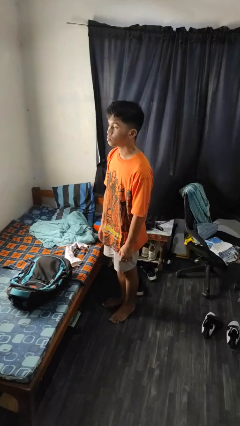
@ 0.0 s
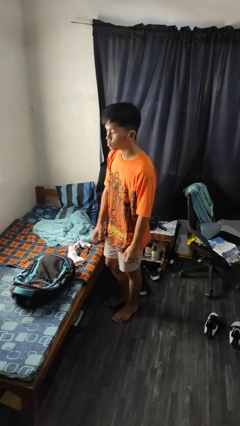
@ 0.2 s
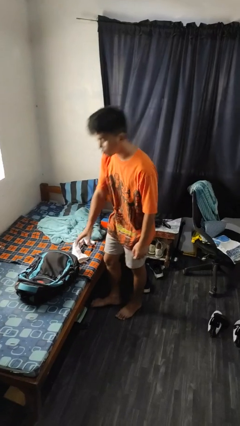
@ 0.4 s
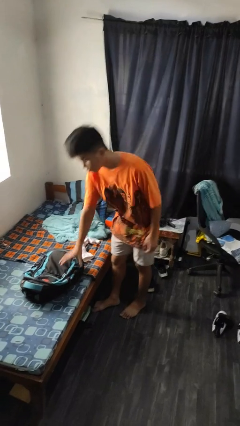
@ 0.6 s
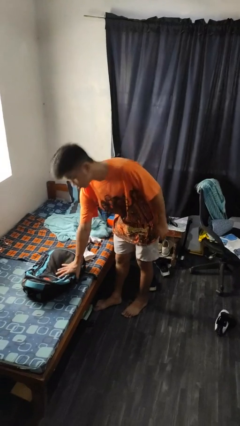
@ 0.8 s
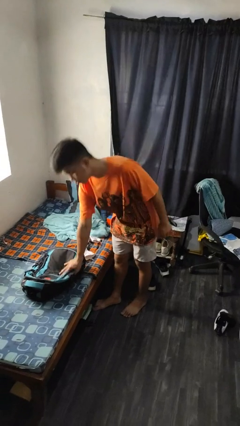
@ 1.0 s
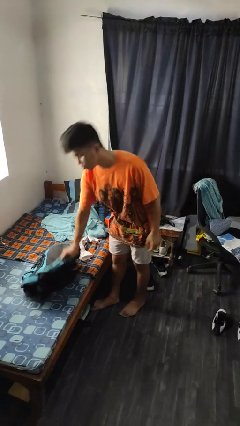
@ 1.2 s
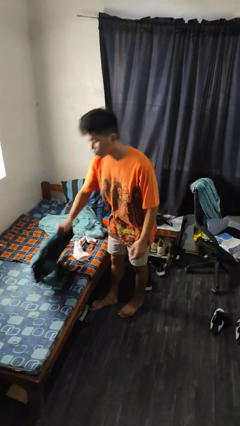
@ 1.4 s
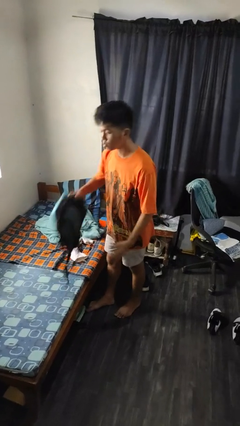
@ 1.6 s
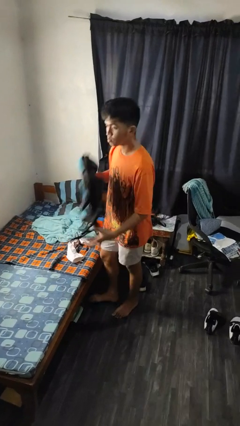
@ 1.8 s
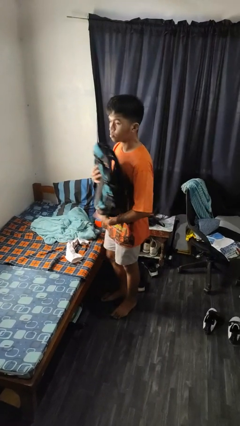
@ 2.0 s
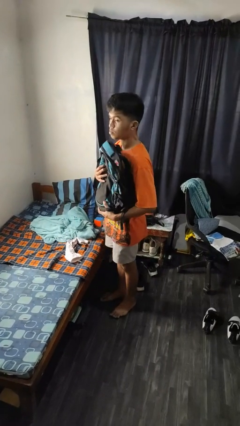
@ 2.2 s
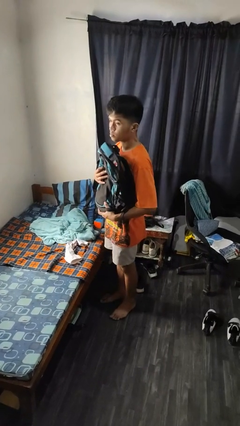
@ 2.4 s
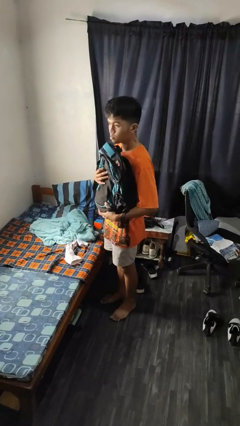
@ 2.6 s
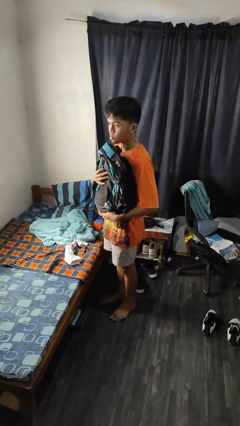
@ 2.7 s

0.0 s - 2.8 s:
person picks up object from bed

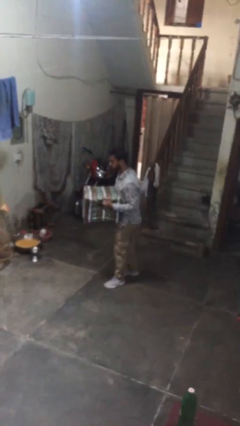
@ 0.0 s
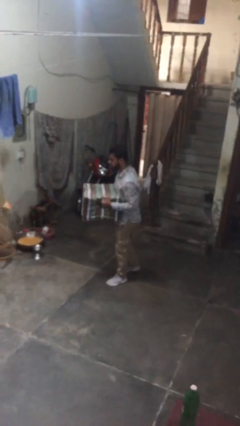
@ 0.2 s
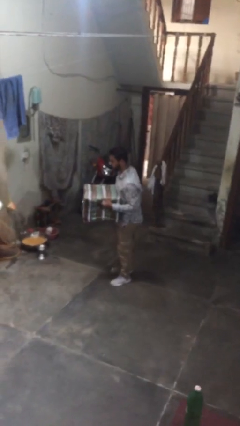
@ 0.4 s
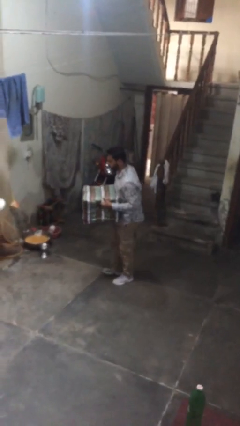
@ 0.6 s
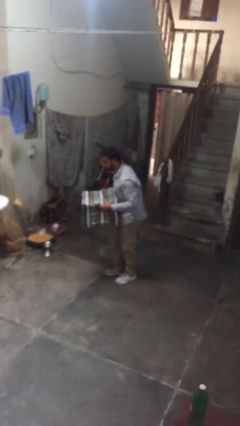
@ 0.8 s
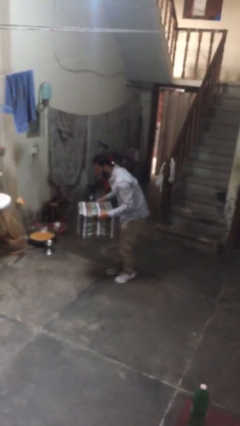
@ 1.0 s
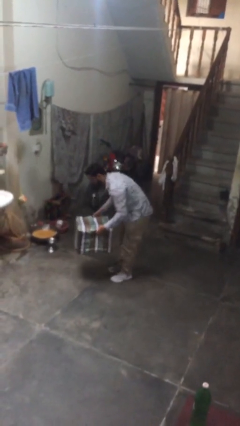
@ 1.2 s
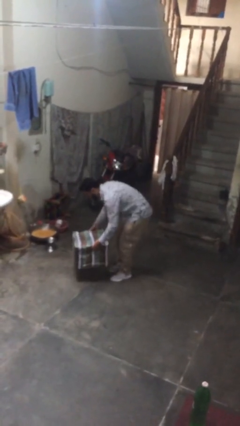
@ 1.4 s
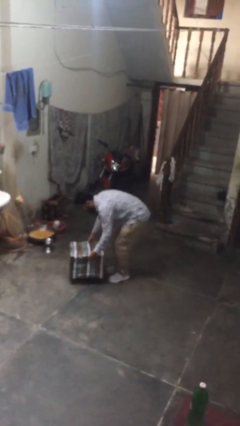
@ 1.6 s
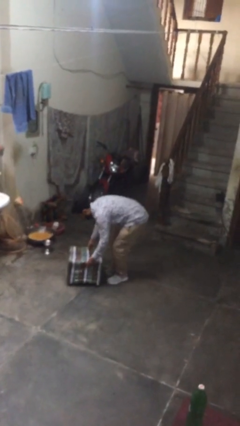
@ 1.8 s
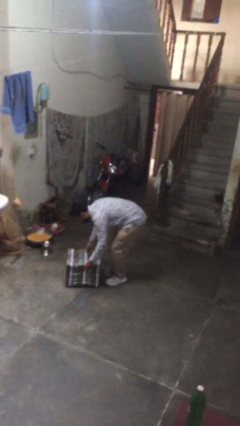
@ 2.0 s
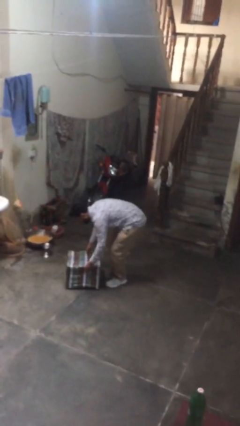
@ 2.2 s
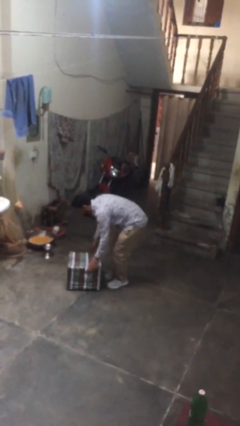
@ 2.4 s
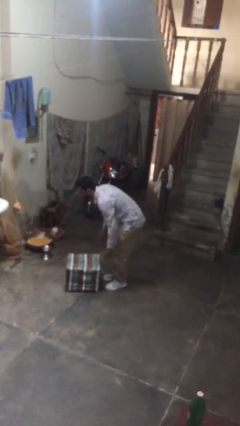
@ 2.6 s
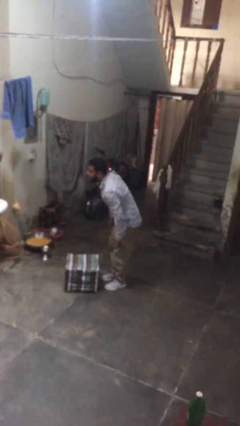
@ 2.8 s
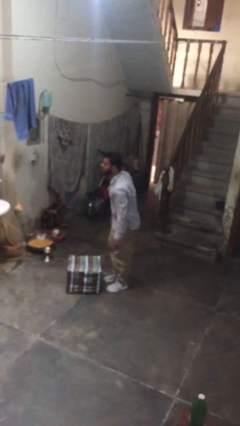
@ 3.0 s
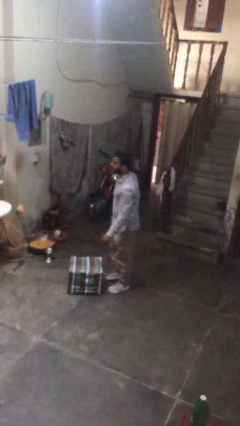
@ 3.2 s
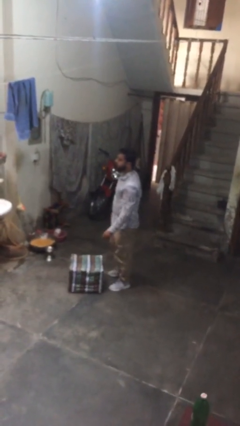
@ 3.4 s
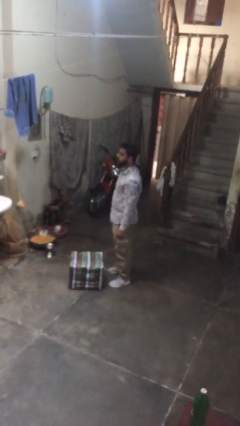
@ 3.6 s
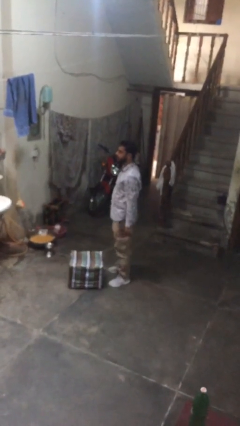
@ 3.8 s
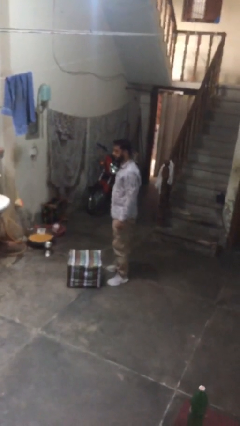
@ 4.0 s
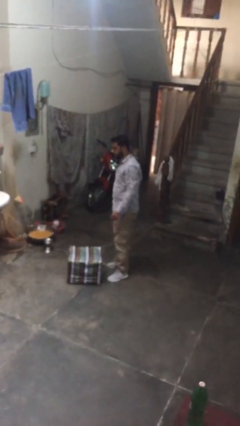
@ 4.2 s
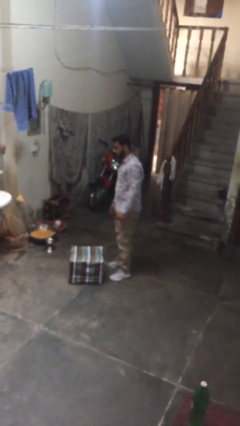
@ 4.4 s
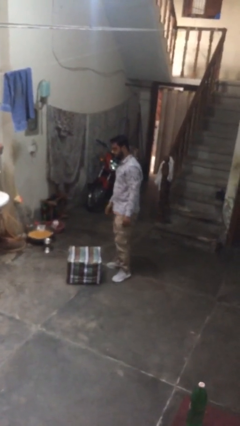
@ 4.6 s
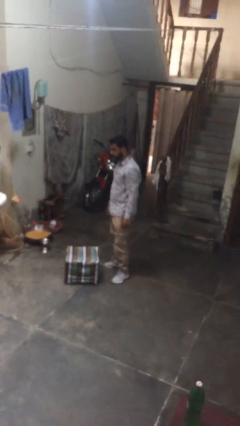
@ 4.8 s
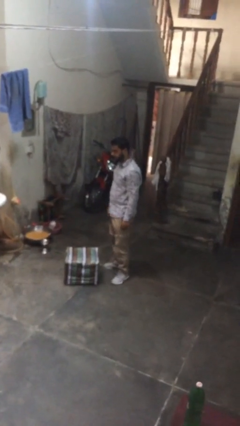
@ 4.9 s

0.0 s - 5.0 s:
person puts down object on floor

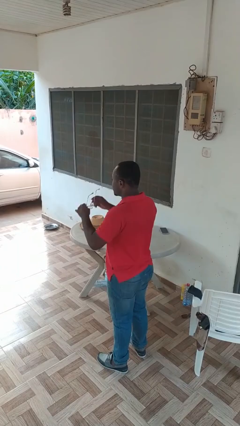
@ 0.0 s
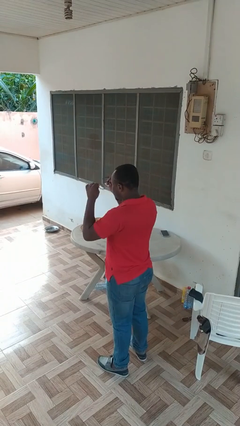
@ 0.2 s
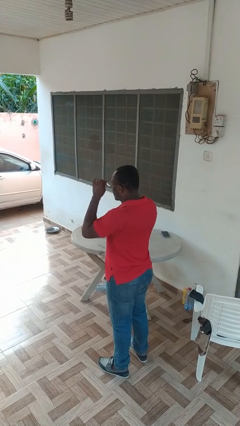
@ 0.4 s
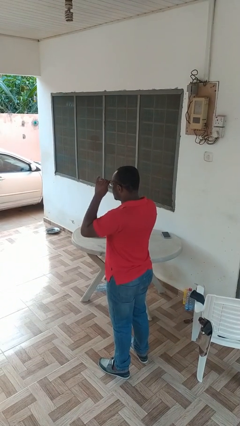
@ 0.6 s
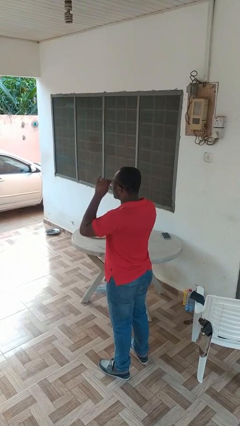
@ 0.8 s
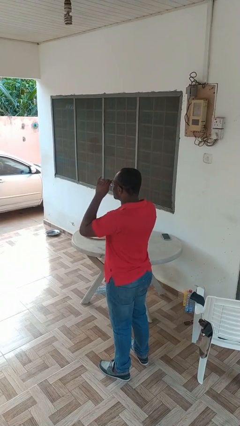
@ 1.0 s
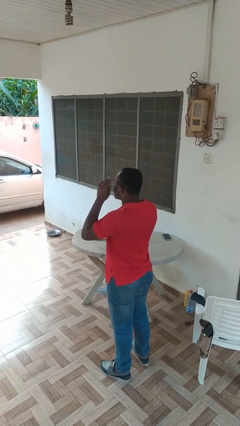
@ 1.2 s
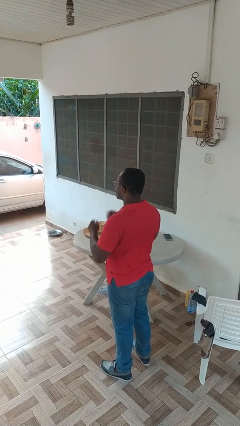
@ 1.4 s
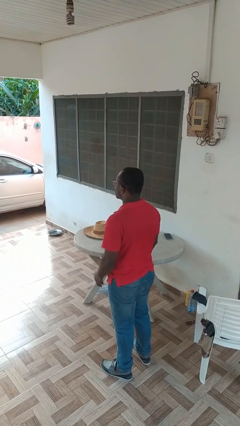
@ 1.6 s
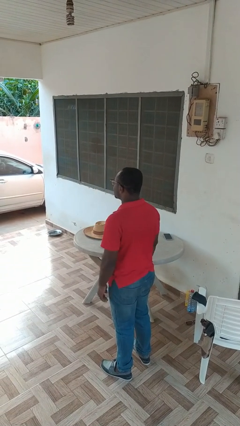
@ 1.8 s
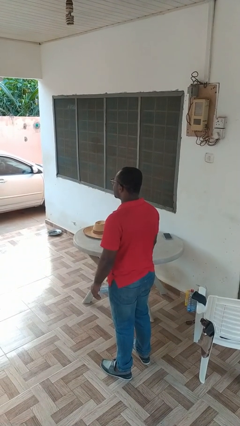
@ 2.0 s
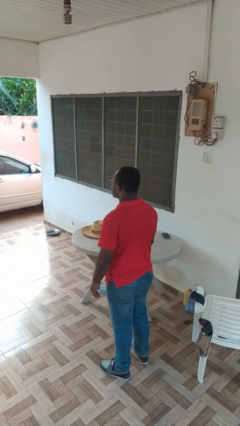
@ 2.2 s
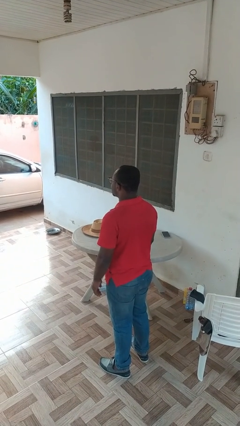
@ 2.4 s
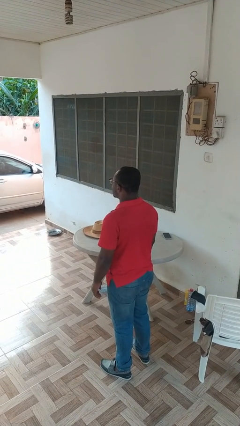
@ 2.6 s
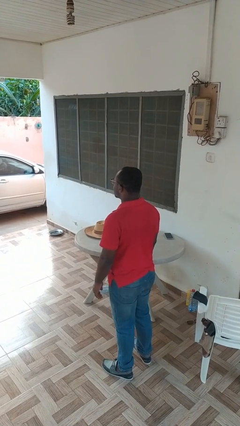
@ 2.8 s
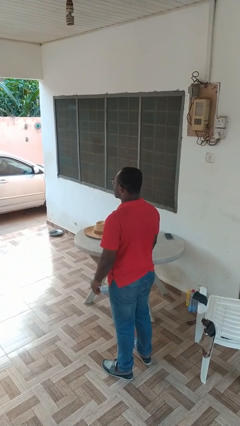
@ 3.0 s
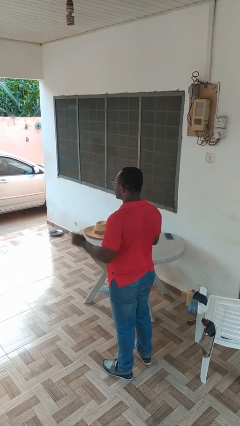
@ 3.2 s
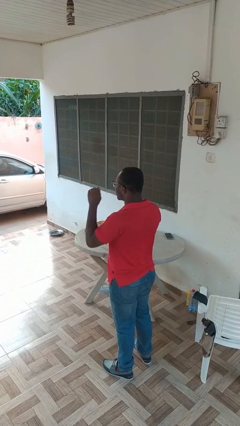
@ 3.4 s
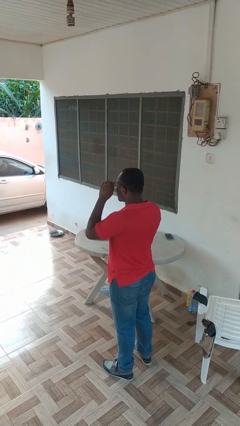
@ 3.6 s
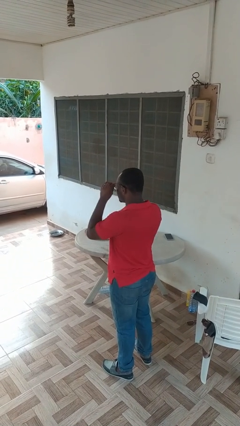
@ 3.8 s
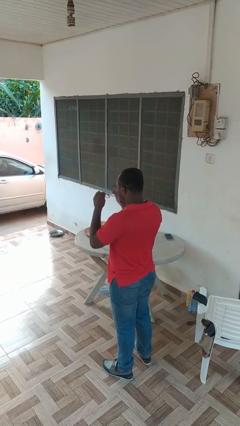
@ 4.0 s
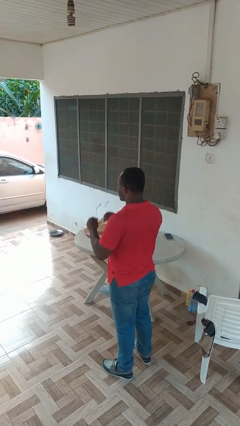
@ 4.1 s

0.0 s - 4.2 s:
person puts on glasses

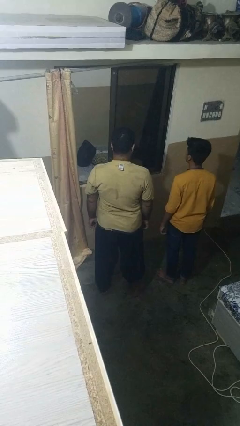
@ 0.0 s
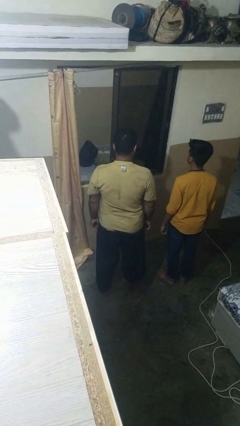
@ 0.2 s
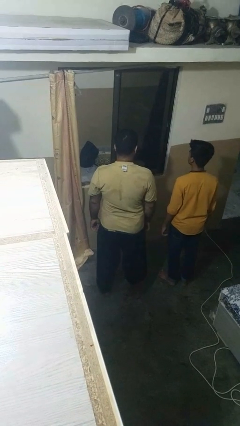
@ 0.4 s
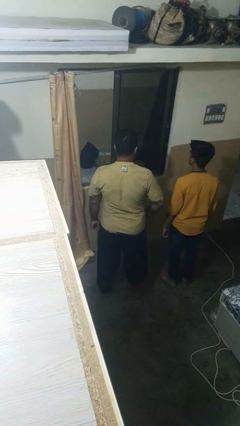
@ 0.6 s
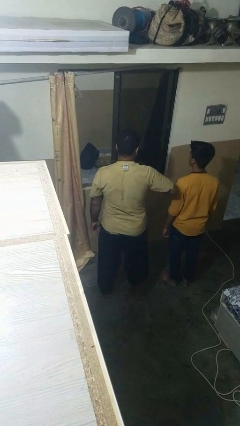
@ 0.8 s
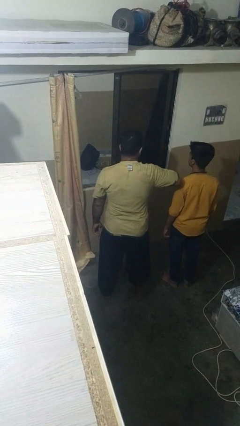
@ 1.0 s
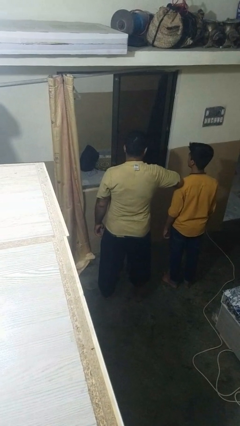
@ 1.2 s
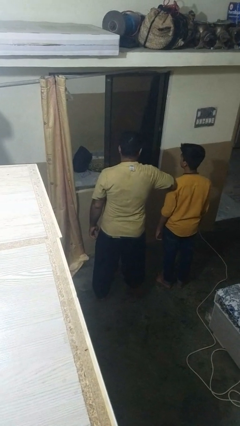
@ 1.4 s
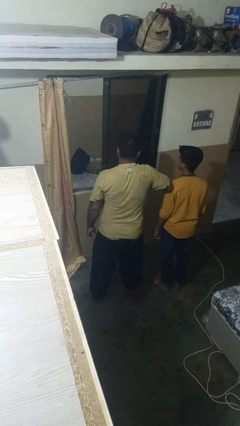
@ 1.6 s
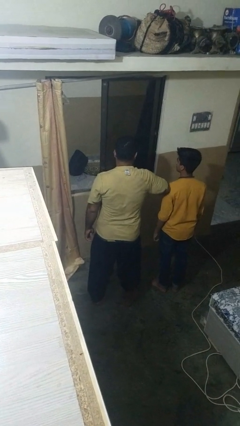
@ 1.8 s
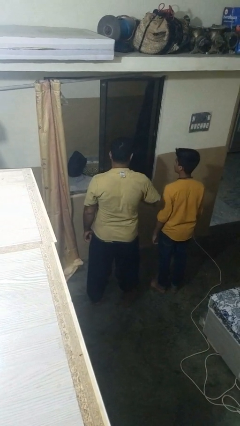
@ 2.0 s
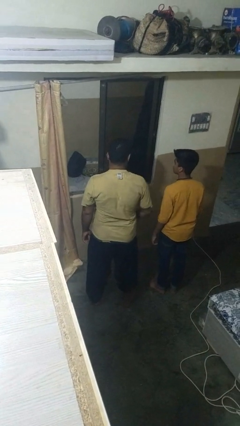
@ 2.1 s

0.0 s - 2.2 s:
person nudges person with elbow

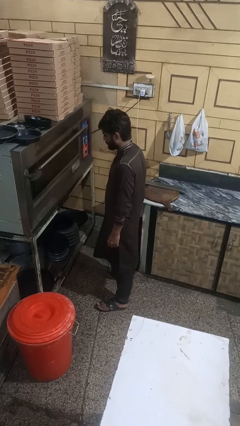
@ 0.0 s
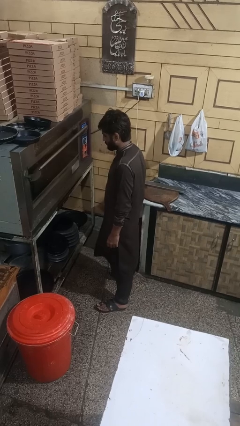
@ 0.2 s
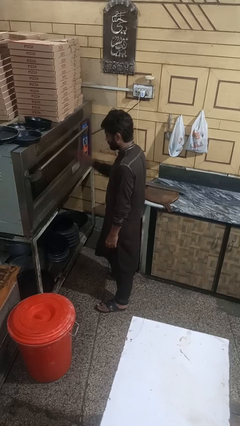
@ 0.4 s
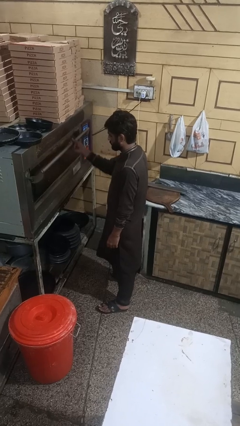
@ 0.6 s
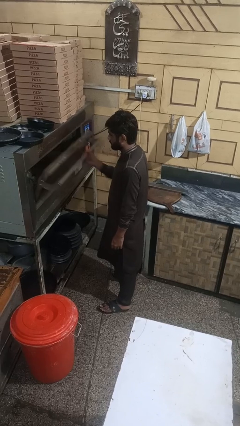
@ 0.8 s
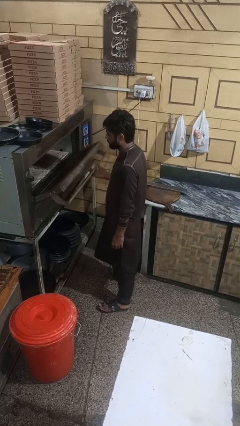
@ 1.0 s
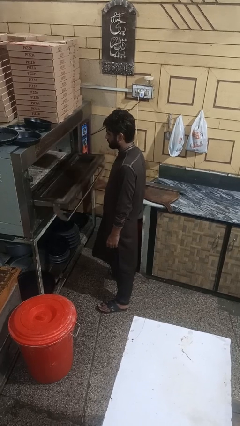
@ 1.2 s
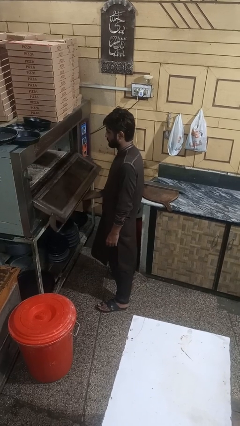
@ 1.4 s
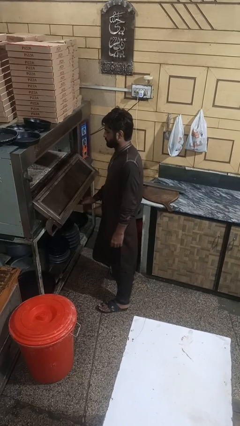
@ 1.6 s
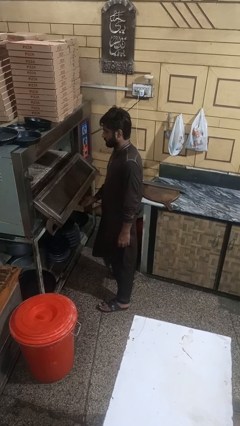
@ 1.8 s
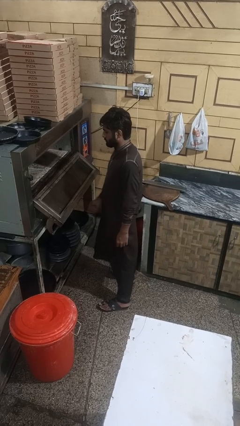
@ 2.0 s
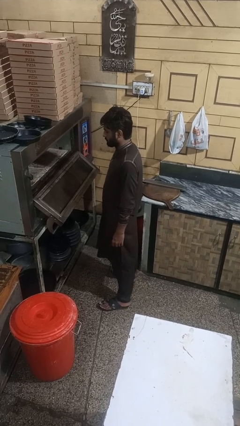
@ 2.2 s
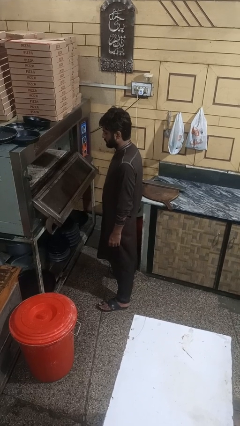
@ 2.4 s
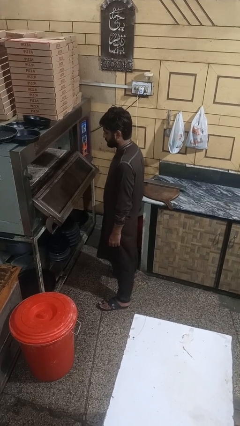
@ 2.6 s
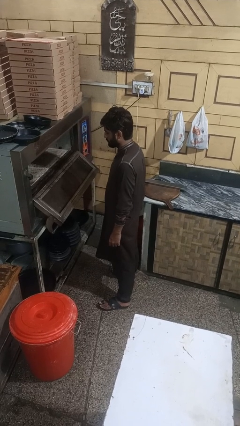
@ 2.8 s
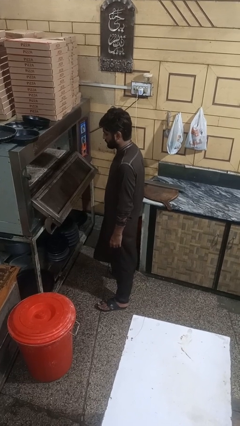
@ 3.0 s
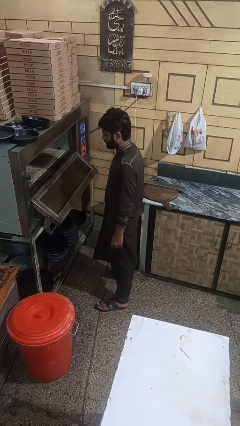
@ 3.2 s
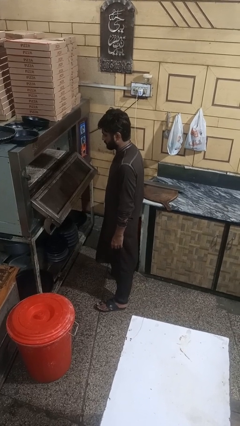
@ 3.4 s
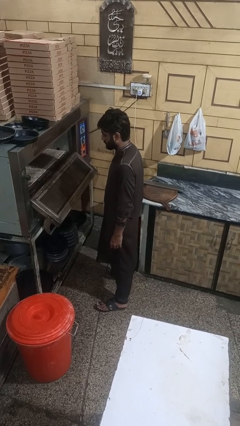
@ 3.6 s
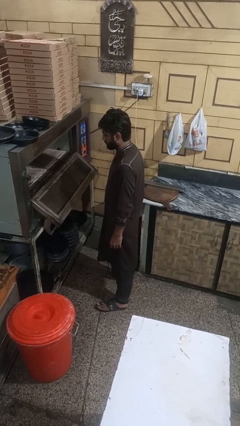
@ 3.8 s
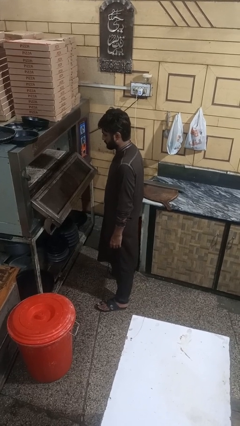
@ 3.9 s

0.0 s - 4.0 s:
person opens microwave
